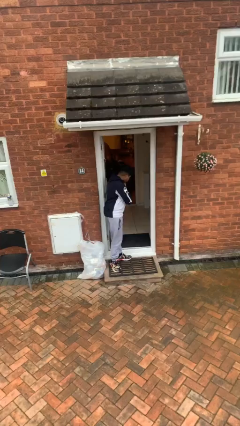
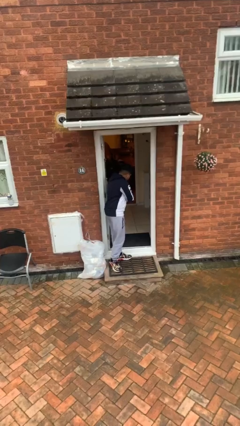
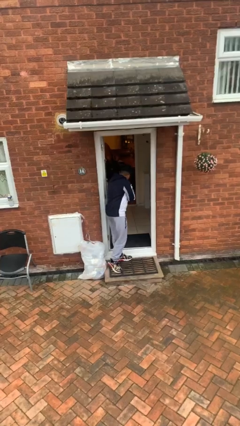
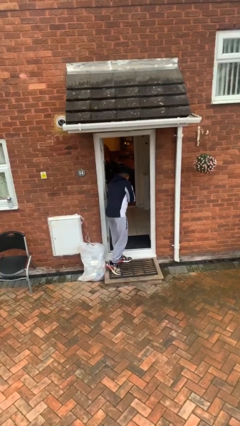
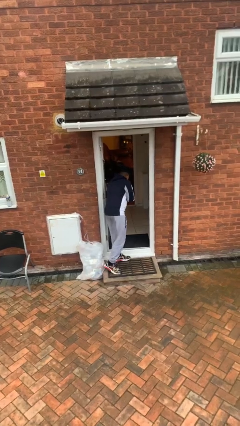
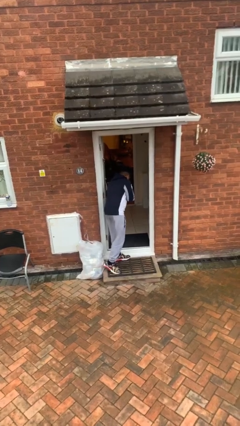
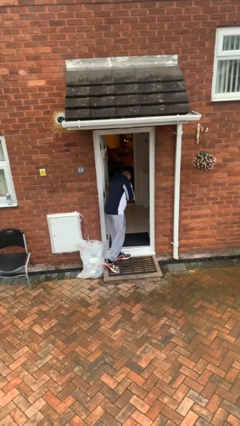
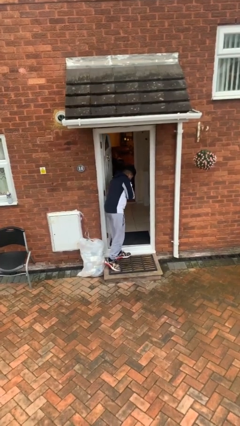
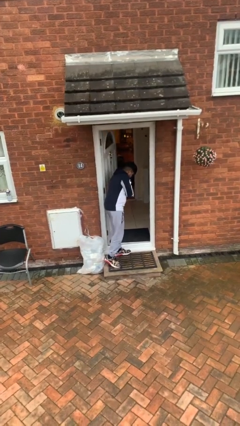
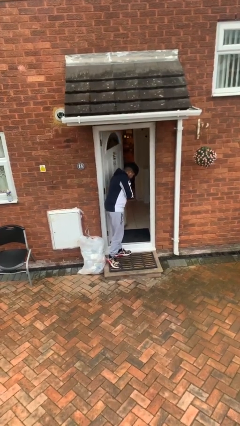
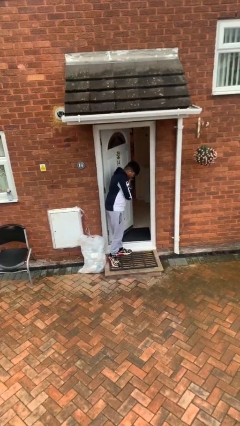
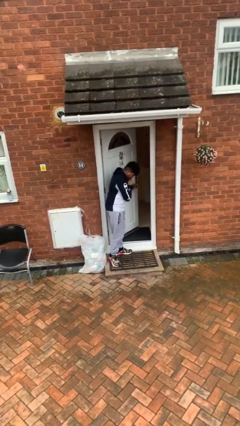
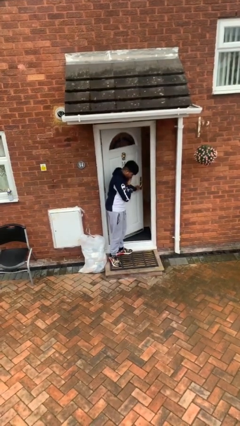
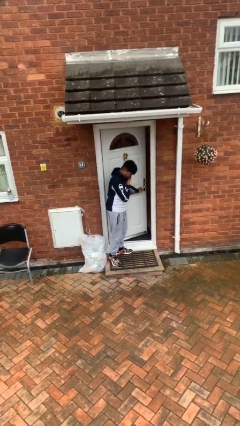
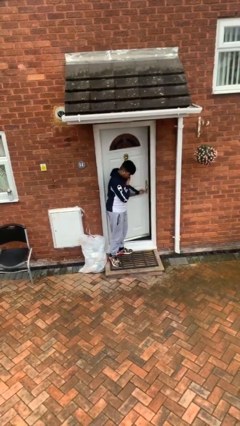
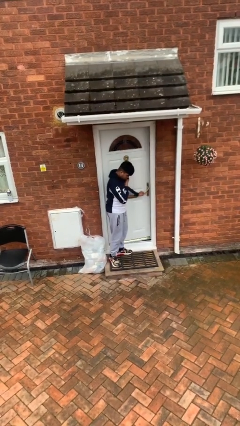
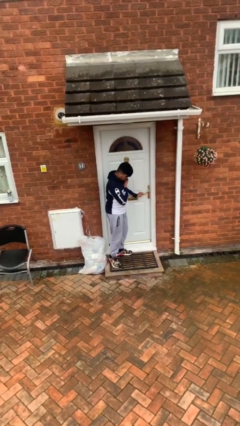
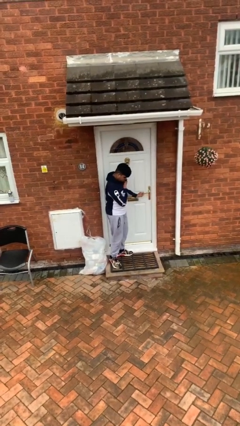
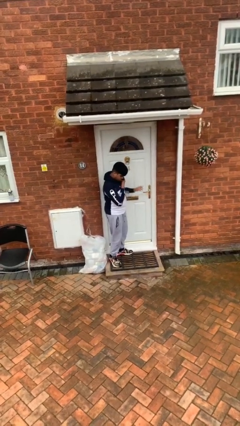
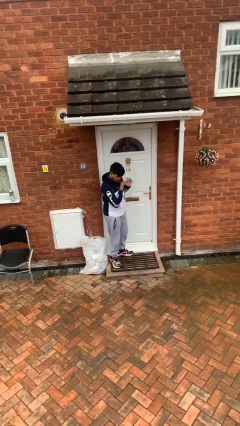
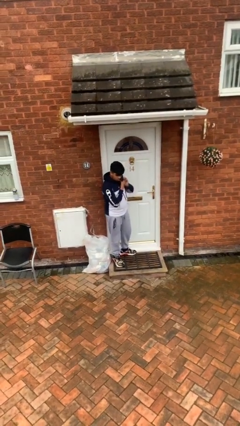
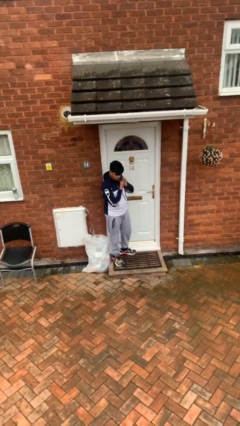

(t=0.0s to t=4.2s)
person closes facility door

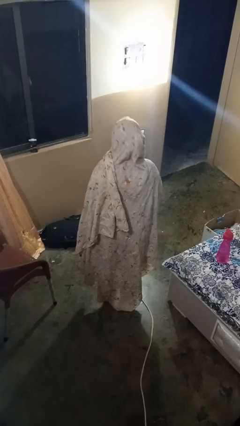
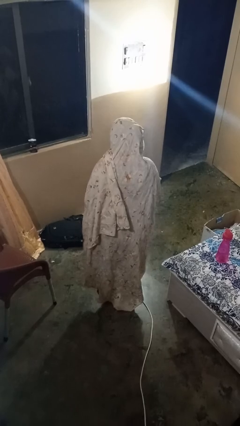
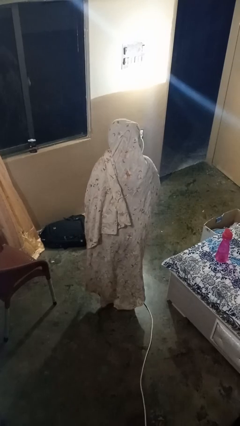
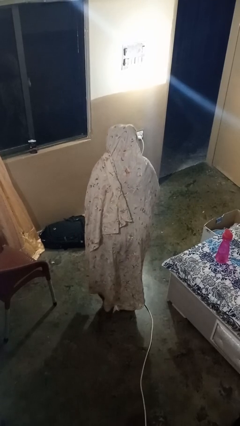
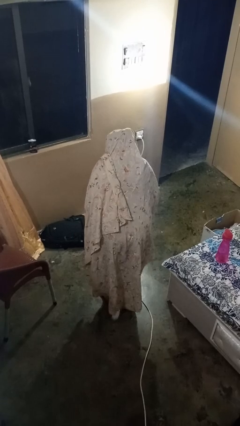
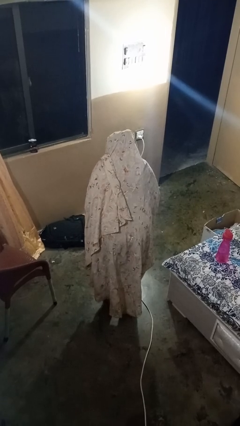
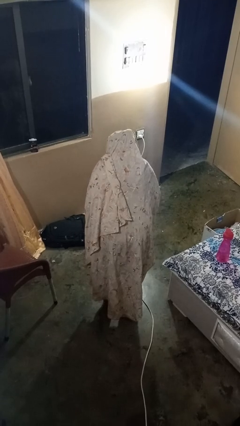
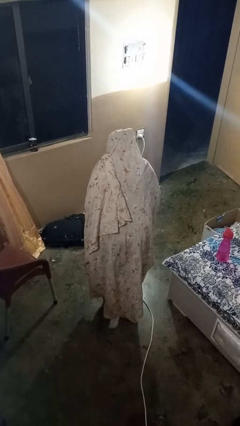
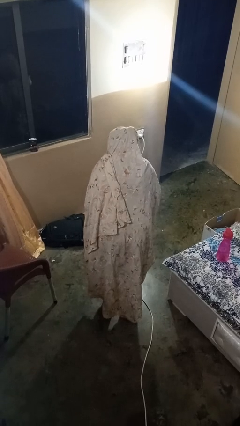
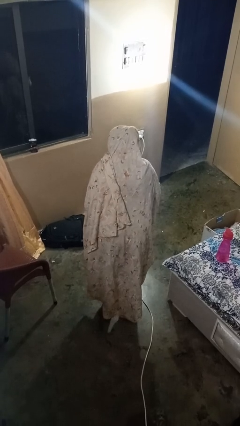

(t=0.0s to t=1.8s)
person bows

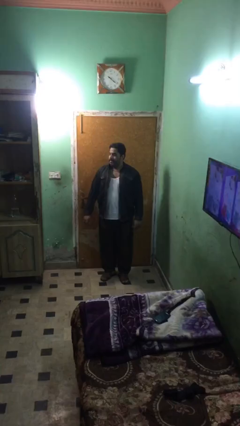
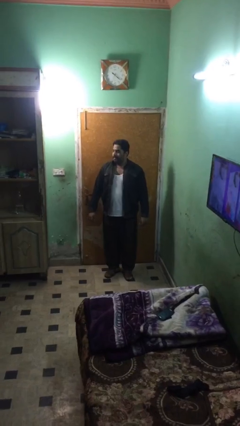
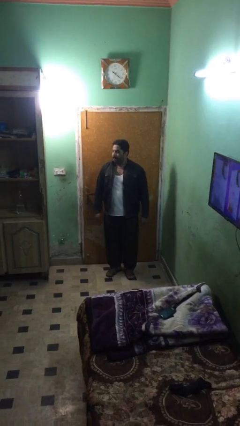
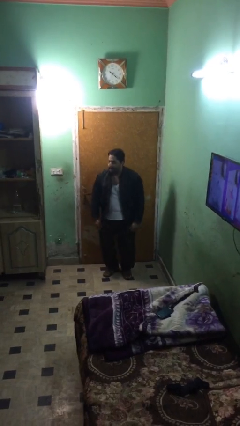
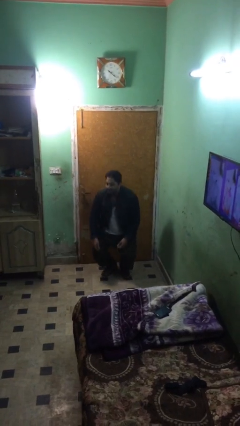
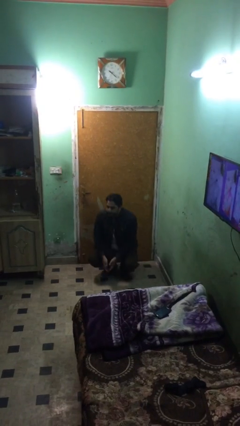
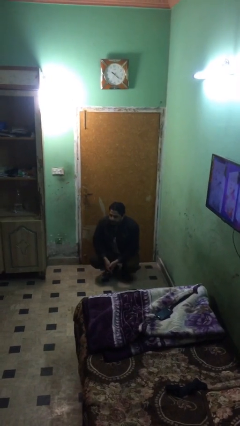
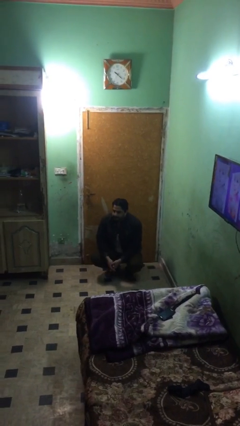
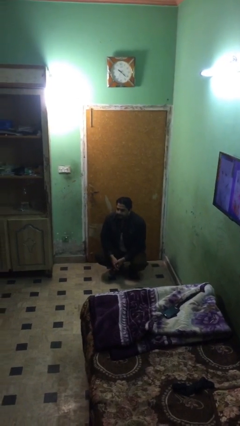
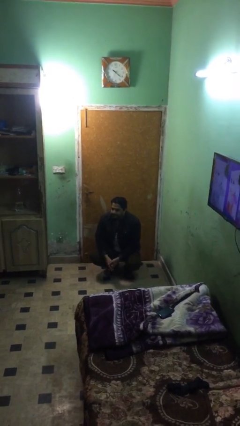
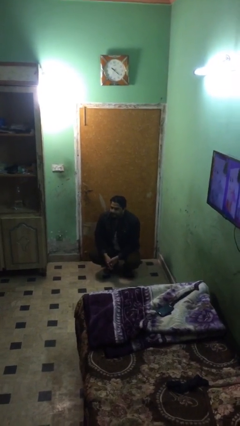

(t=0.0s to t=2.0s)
person sits down

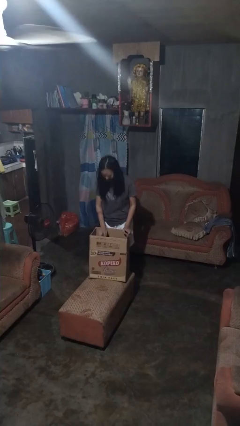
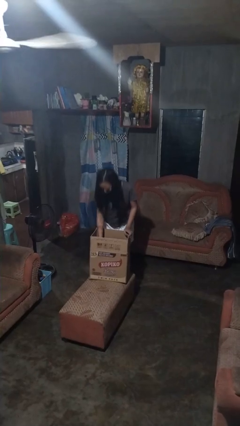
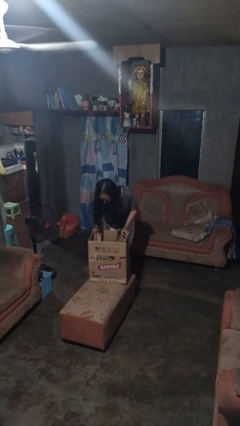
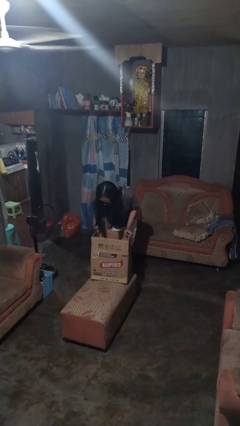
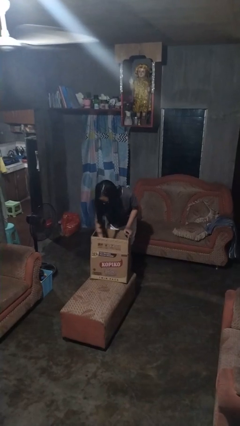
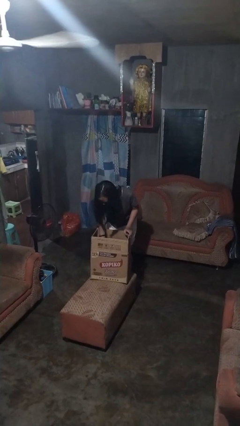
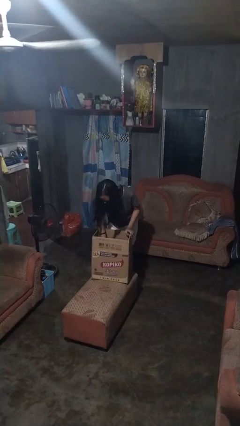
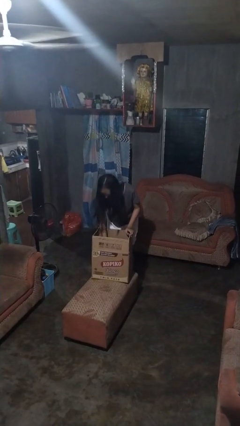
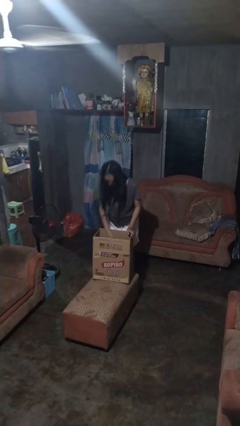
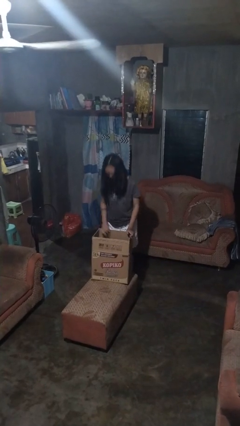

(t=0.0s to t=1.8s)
person searches in box

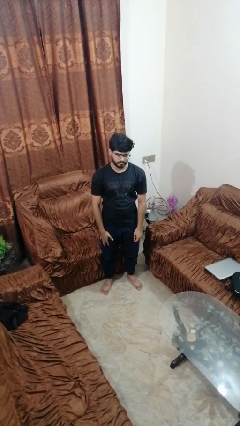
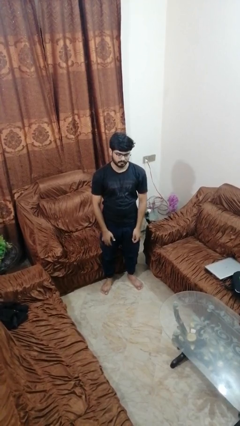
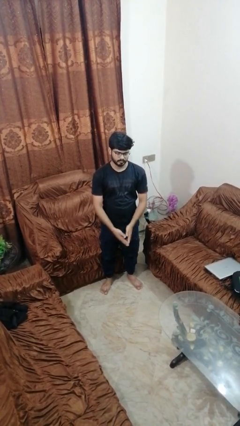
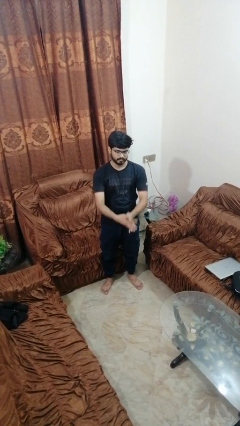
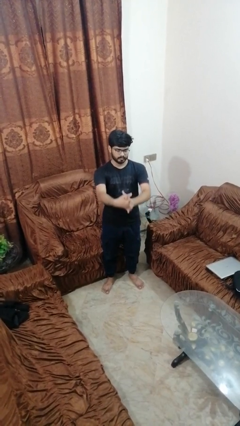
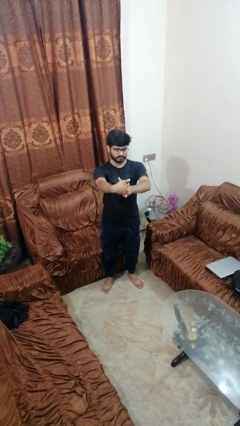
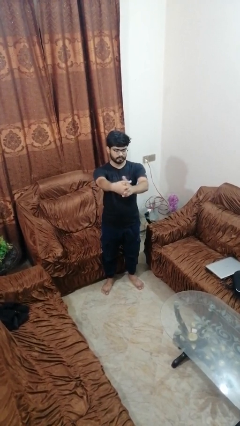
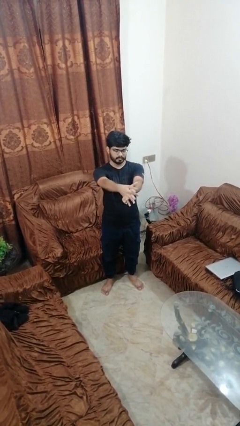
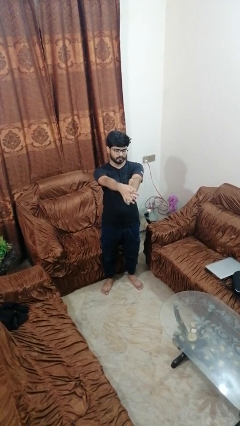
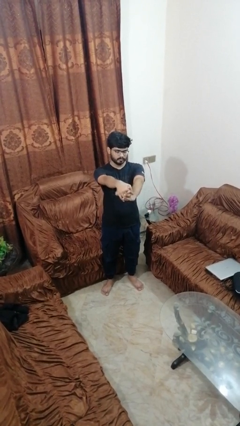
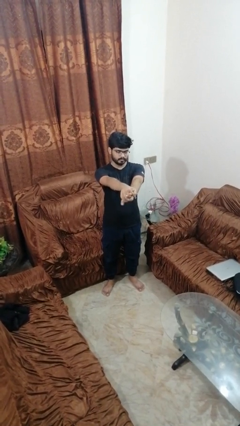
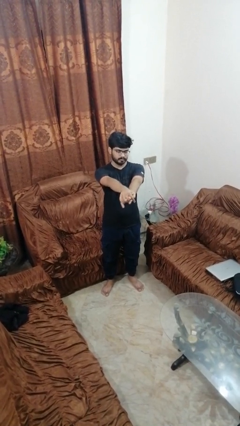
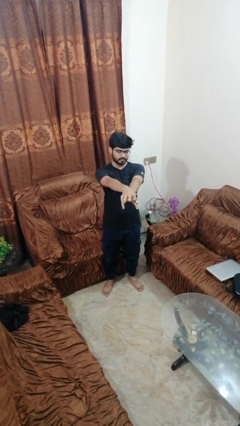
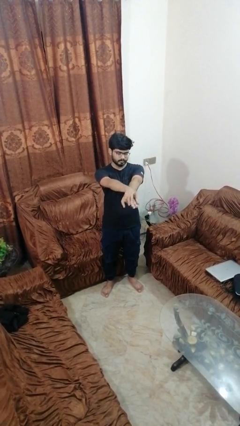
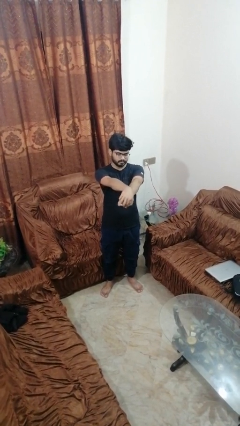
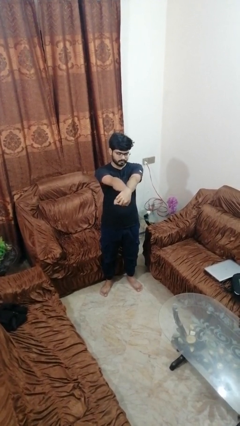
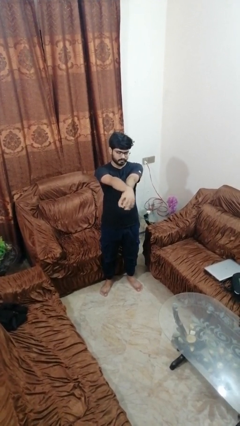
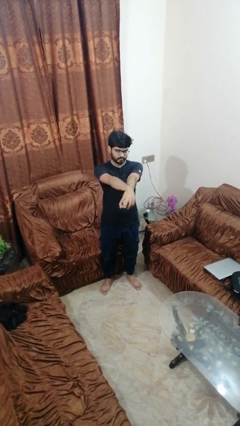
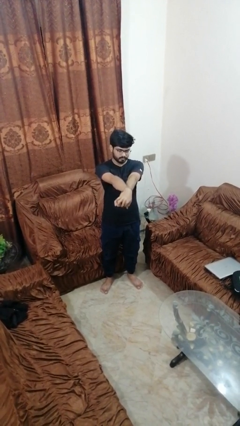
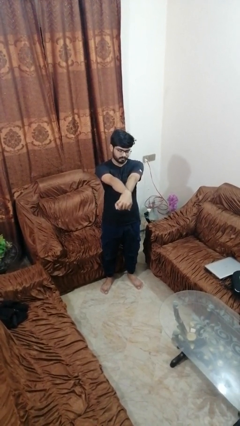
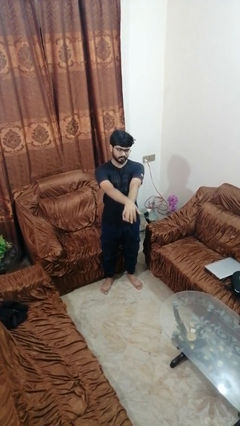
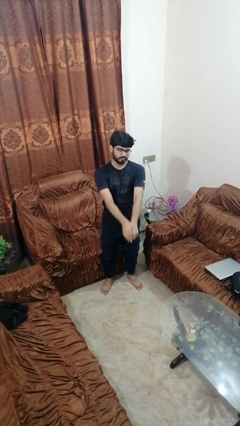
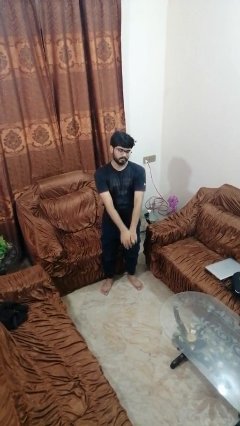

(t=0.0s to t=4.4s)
person cracks knuckles

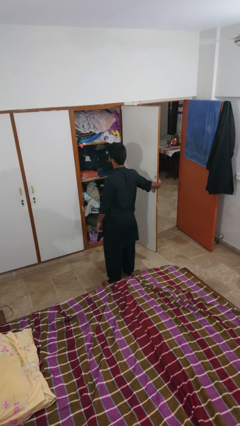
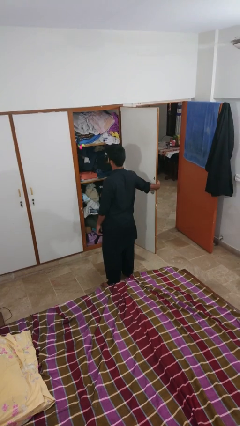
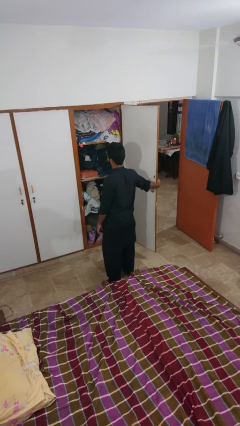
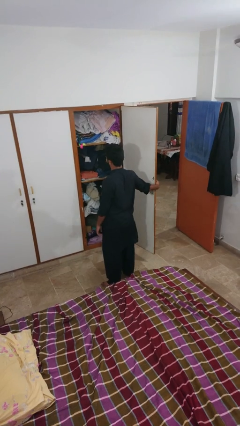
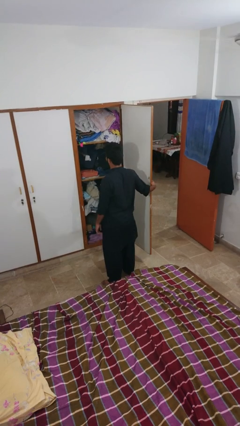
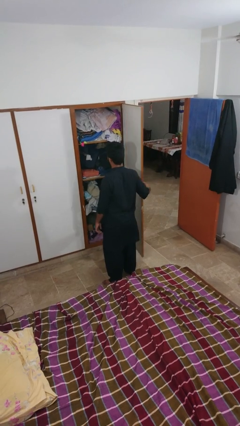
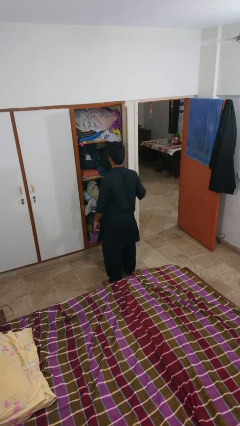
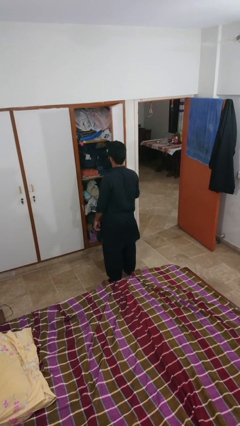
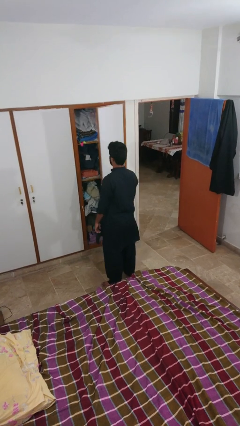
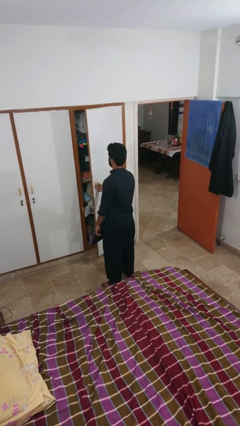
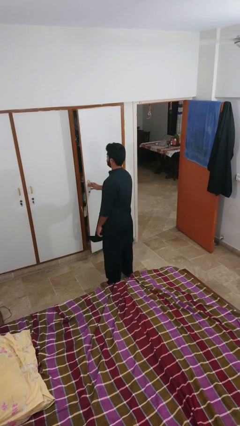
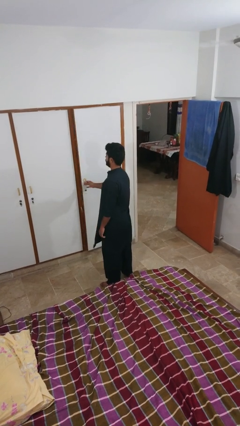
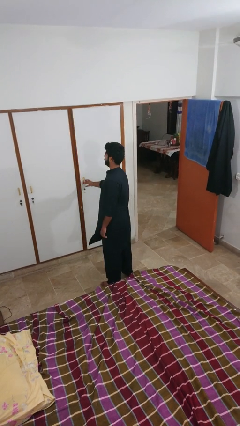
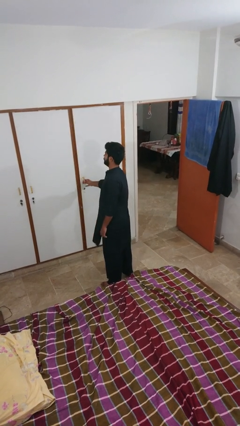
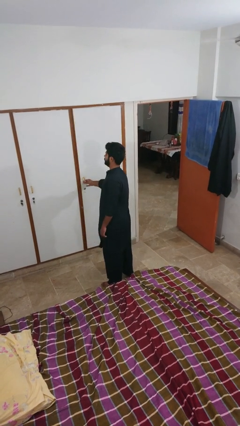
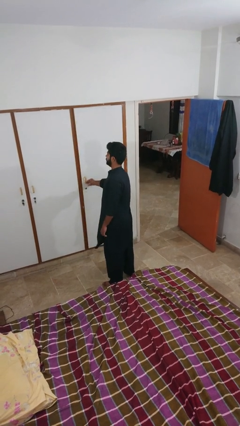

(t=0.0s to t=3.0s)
person closes closet door

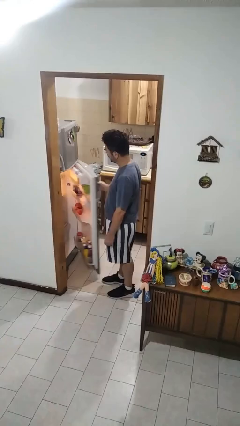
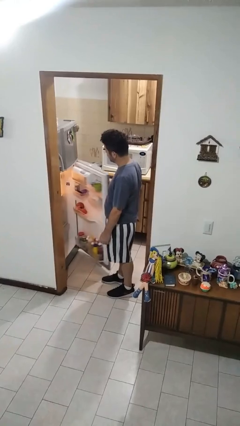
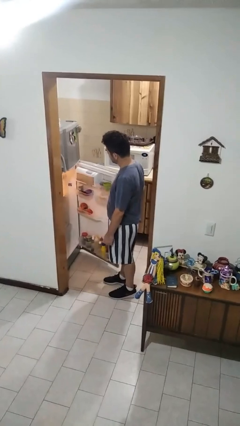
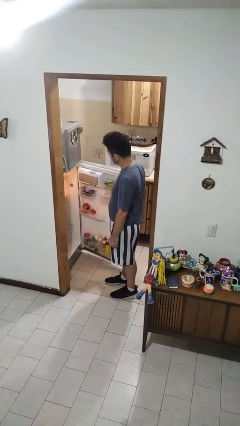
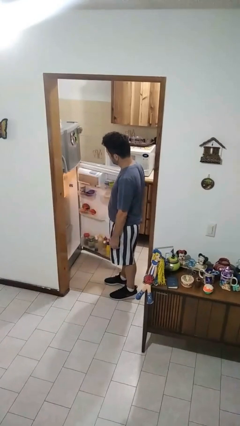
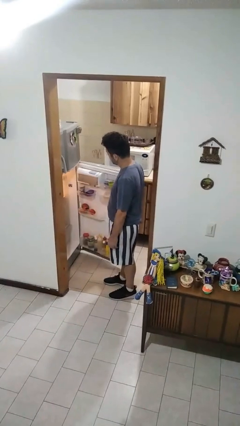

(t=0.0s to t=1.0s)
person opens refrigerator
